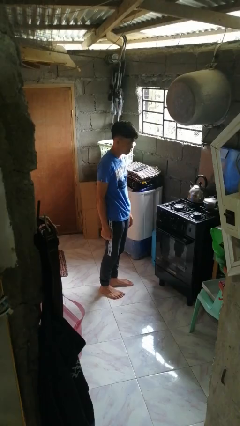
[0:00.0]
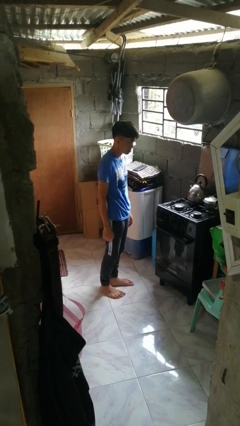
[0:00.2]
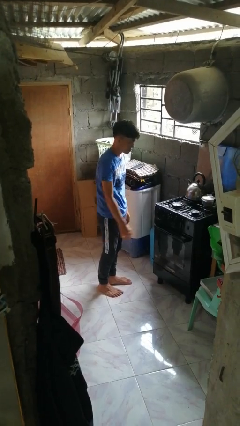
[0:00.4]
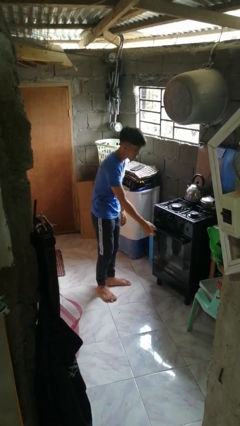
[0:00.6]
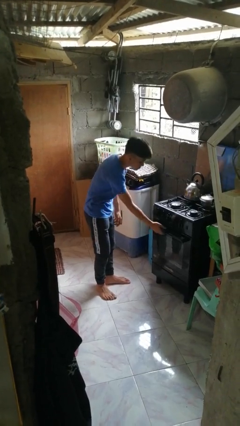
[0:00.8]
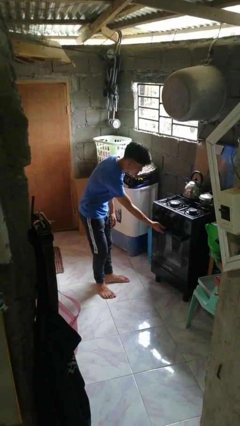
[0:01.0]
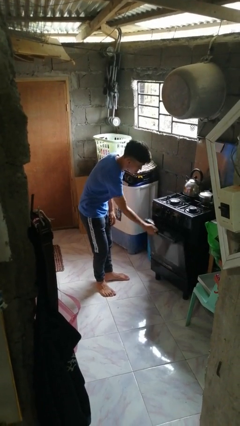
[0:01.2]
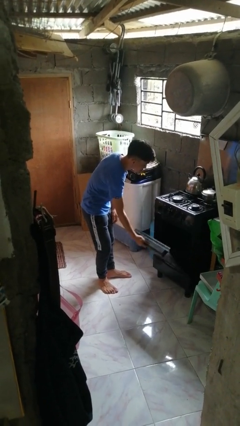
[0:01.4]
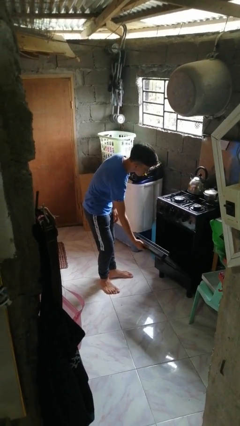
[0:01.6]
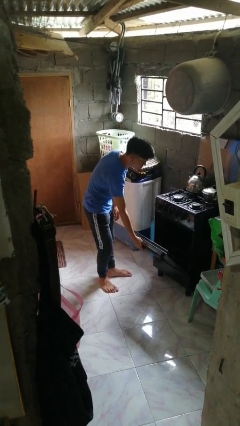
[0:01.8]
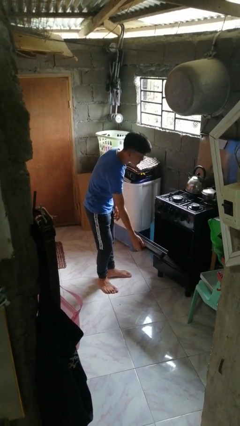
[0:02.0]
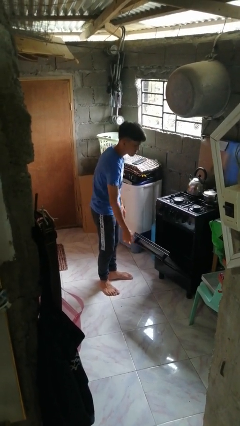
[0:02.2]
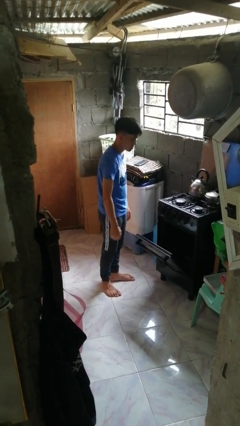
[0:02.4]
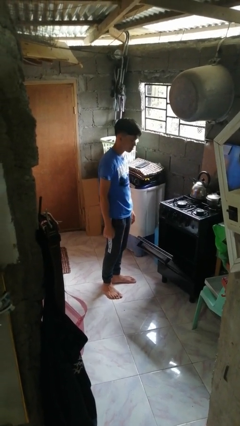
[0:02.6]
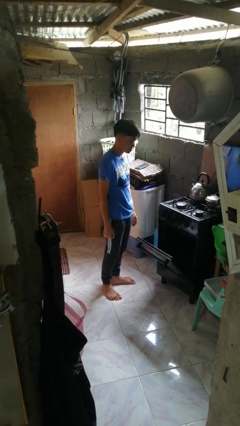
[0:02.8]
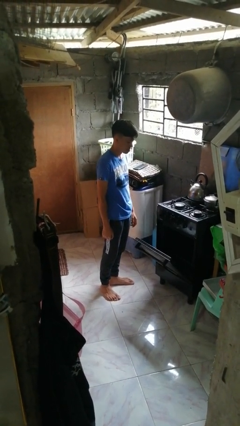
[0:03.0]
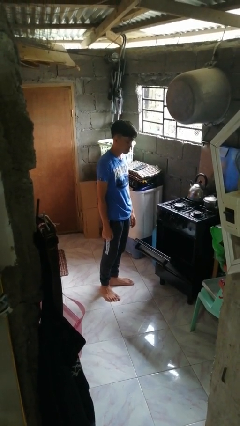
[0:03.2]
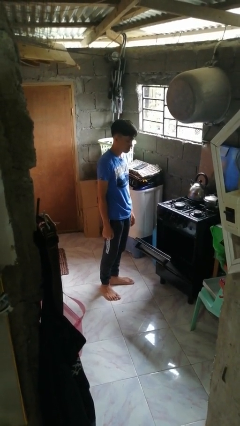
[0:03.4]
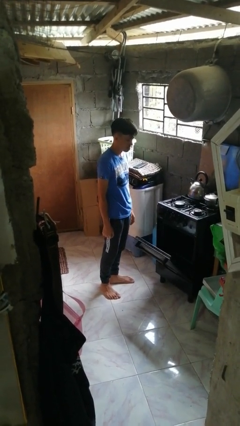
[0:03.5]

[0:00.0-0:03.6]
person opens oven door

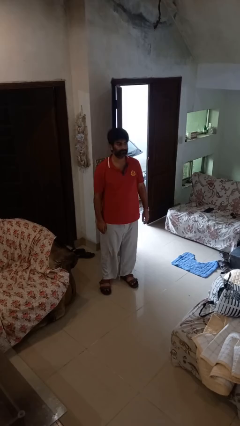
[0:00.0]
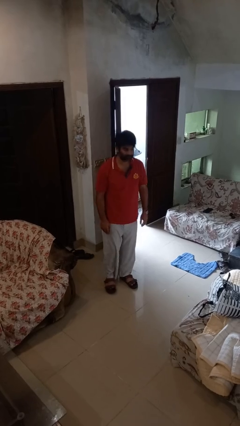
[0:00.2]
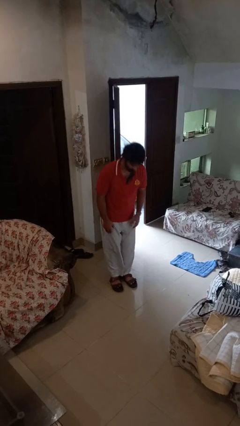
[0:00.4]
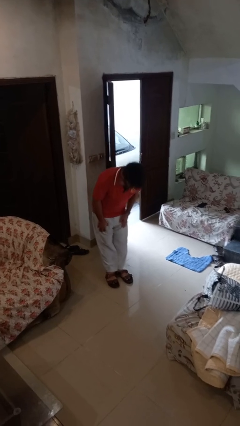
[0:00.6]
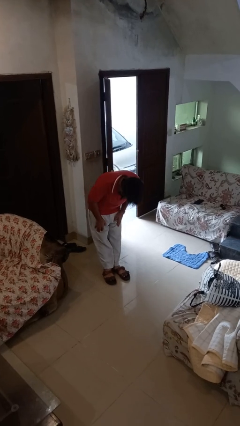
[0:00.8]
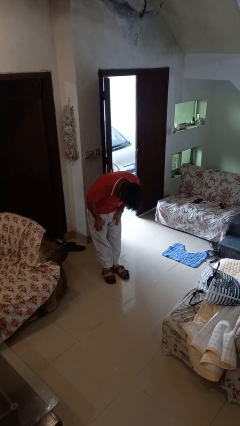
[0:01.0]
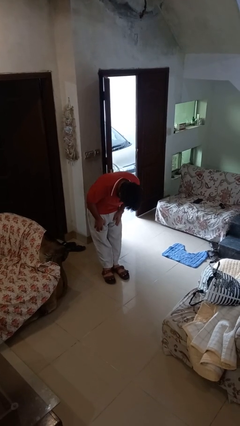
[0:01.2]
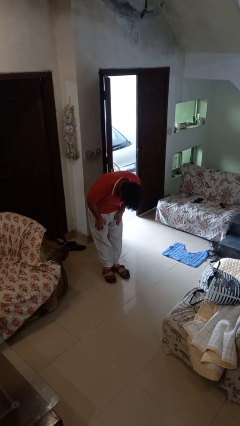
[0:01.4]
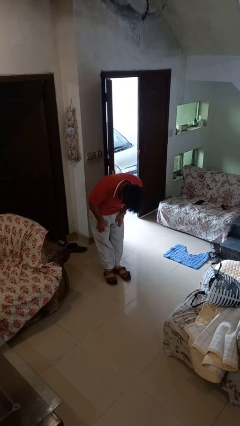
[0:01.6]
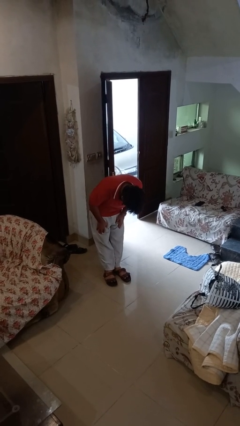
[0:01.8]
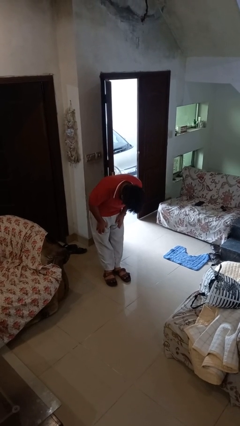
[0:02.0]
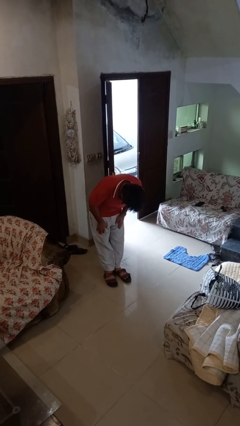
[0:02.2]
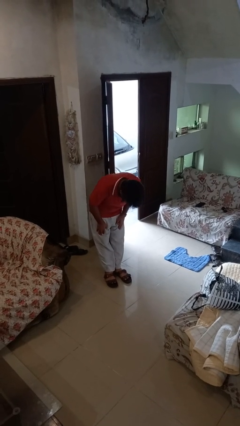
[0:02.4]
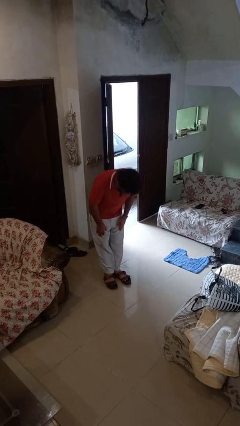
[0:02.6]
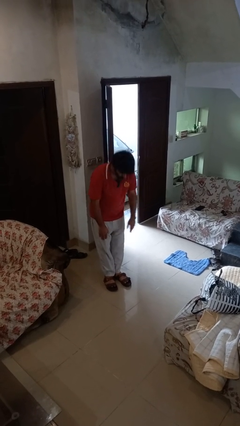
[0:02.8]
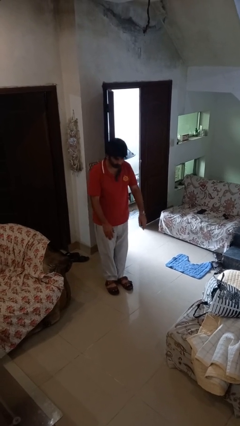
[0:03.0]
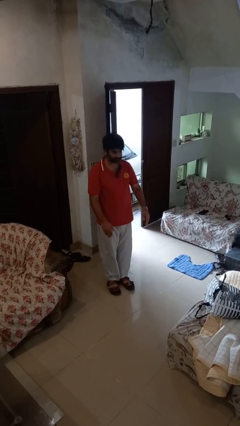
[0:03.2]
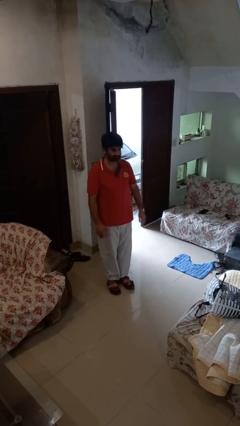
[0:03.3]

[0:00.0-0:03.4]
person bows

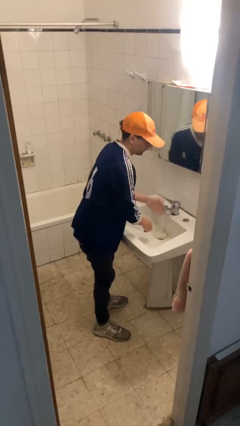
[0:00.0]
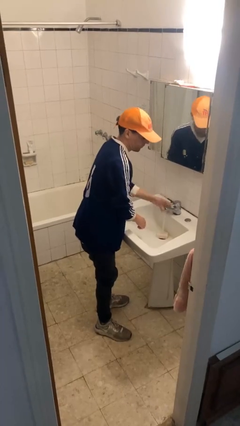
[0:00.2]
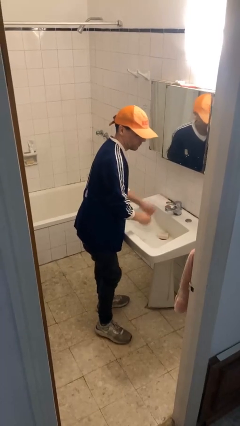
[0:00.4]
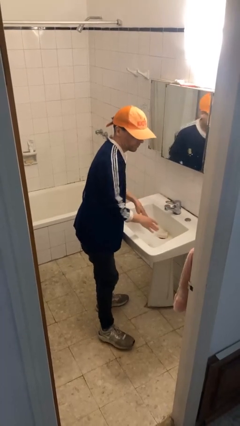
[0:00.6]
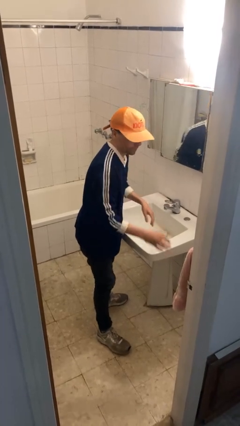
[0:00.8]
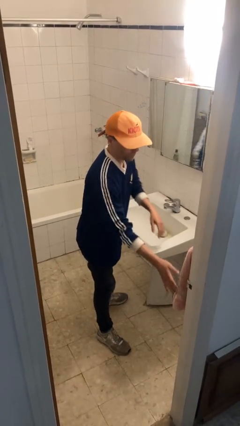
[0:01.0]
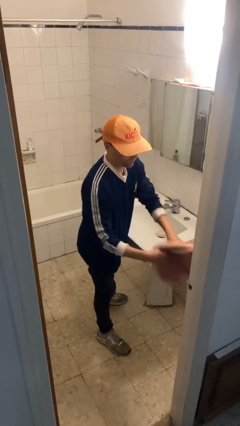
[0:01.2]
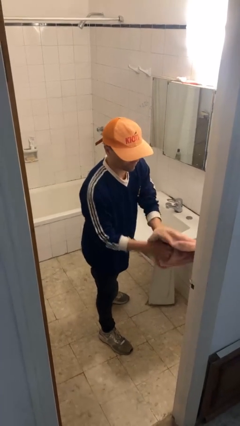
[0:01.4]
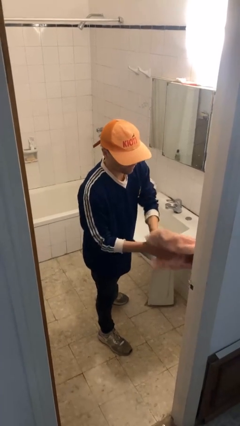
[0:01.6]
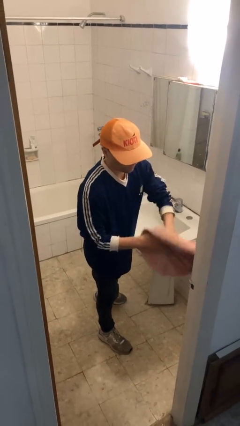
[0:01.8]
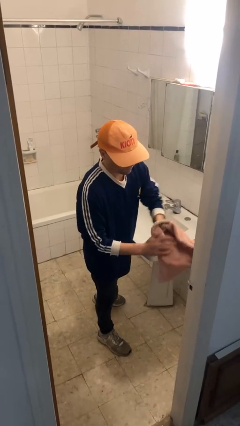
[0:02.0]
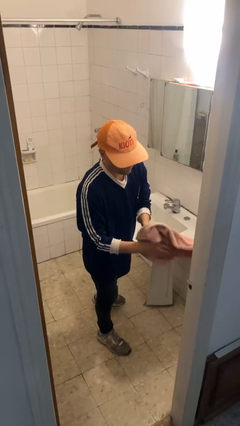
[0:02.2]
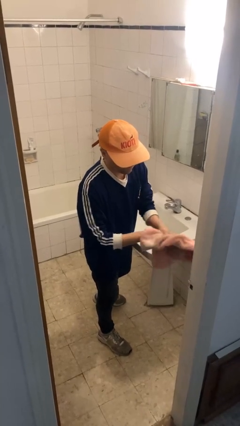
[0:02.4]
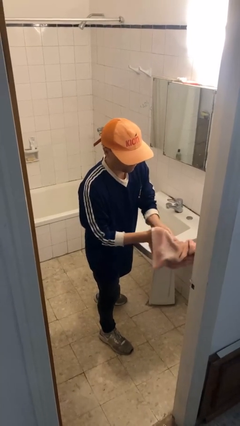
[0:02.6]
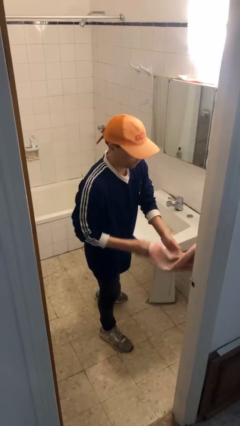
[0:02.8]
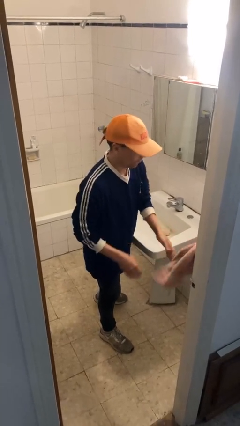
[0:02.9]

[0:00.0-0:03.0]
person dries hands with towel

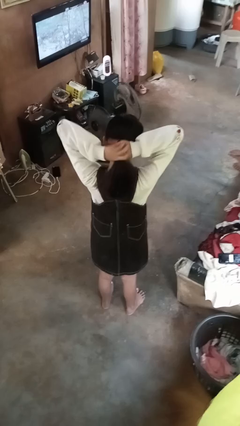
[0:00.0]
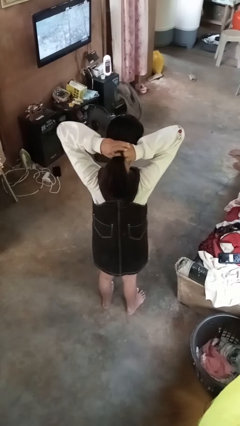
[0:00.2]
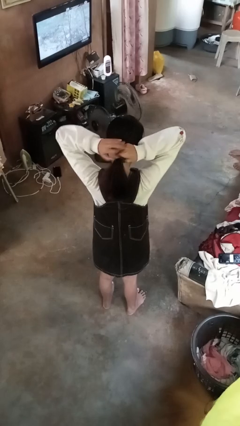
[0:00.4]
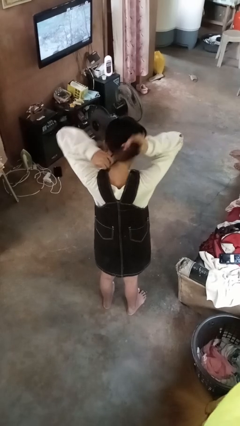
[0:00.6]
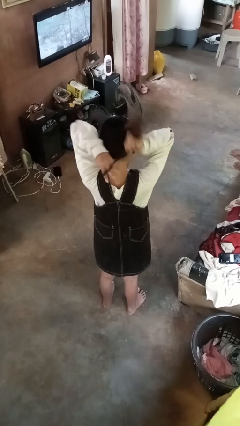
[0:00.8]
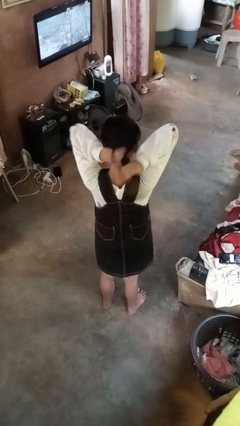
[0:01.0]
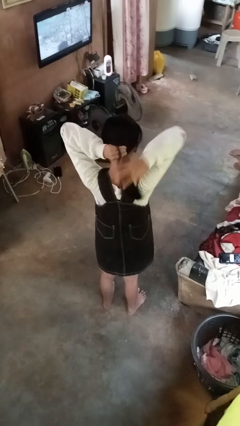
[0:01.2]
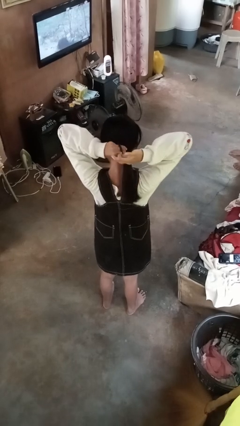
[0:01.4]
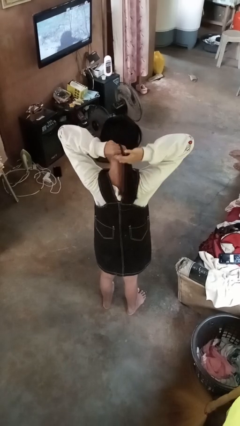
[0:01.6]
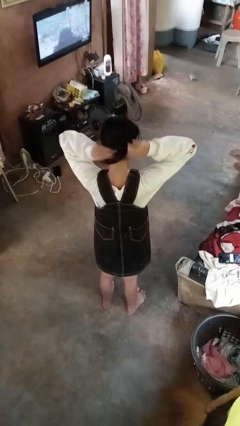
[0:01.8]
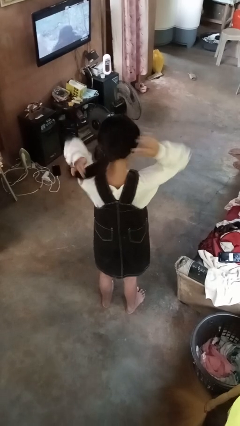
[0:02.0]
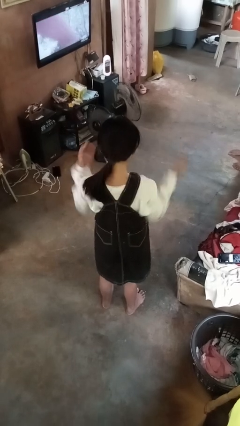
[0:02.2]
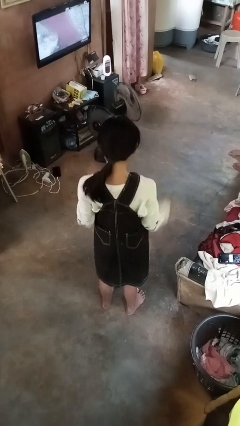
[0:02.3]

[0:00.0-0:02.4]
person puts hair in ponytail

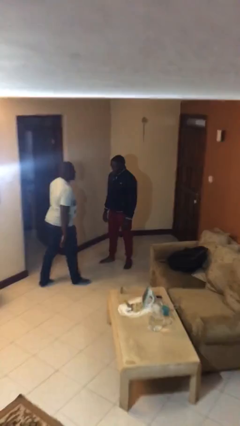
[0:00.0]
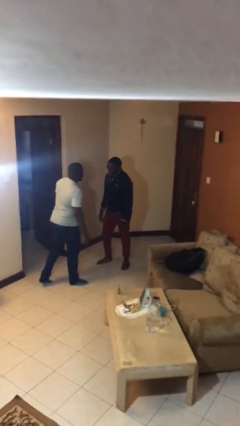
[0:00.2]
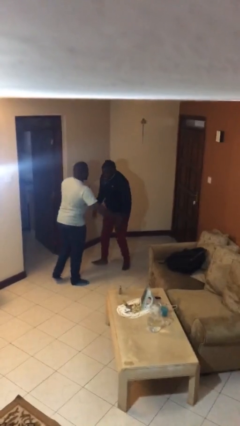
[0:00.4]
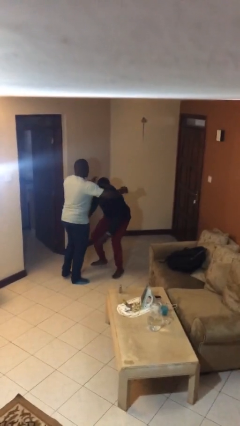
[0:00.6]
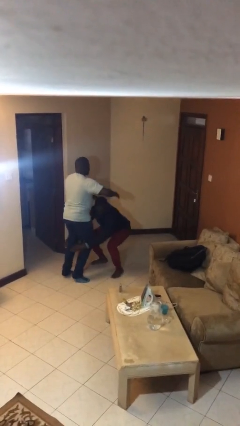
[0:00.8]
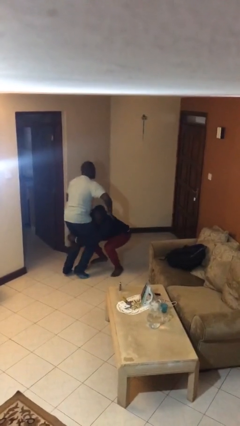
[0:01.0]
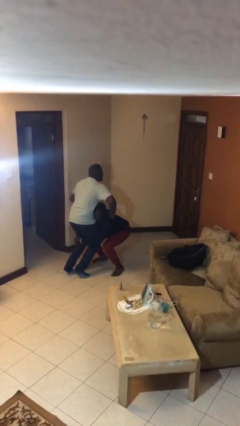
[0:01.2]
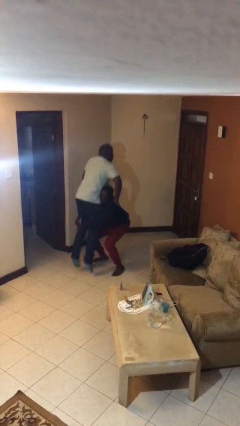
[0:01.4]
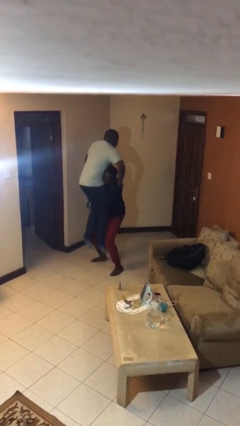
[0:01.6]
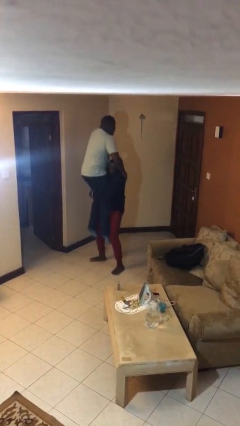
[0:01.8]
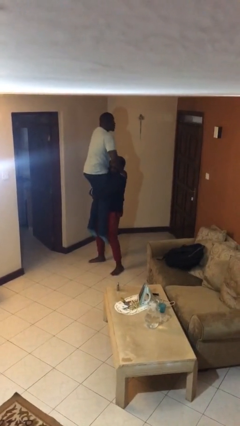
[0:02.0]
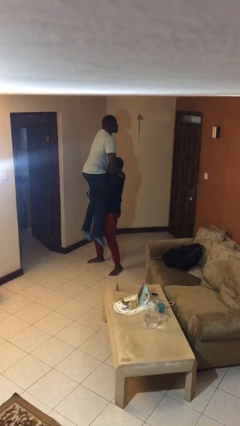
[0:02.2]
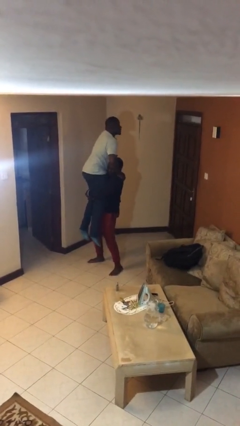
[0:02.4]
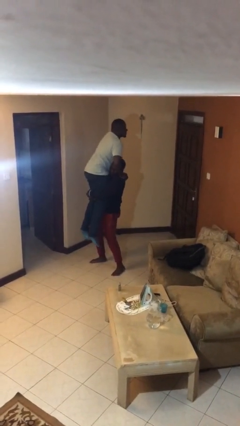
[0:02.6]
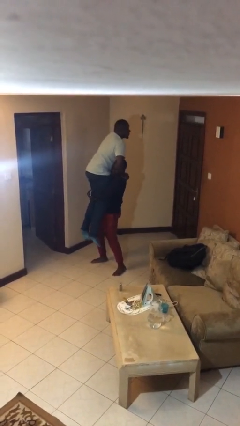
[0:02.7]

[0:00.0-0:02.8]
person picks up person

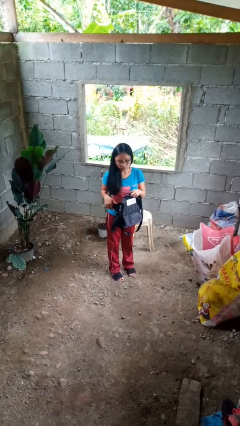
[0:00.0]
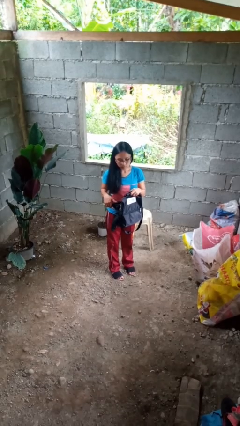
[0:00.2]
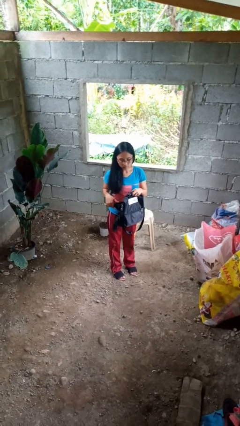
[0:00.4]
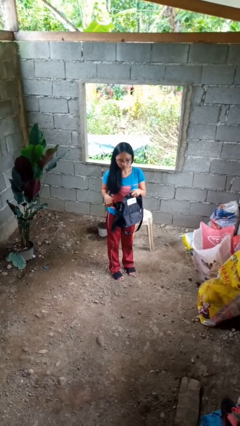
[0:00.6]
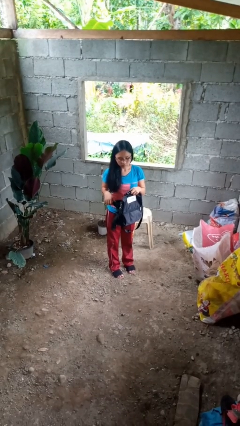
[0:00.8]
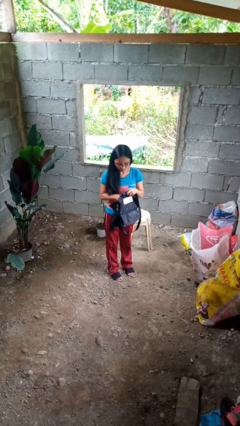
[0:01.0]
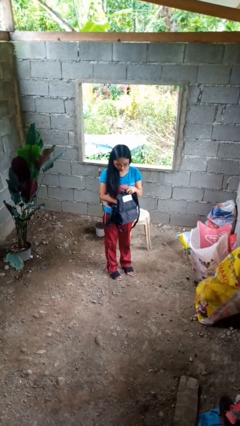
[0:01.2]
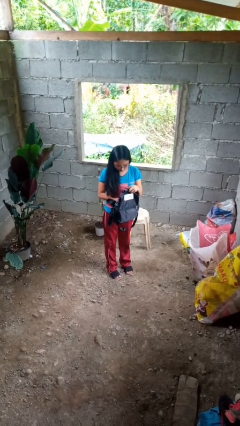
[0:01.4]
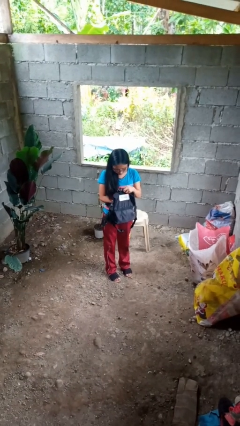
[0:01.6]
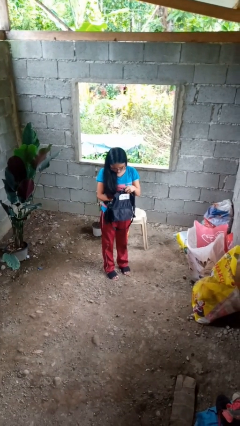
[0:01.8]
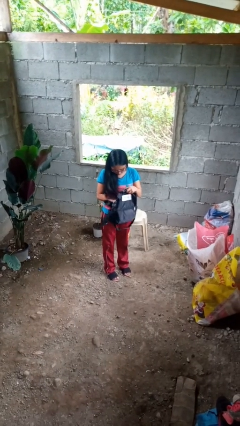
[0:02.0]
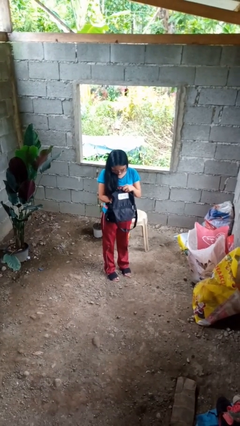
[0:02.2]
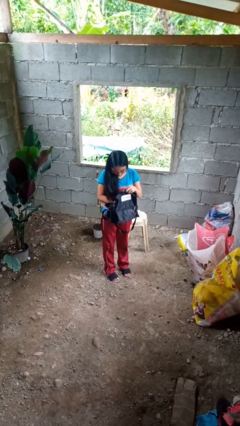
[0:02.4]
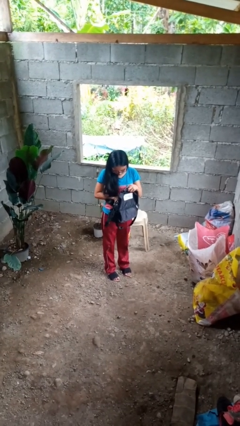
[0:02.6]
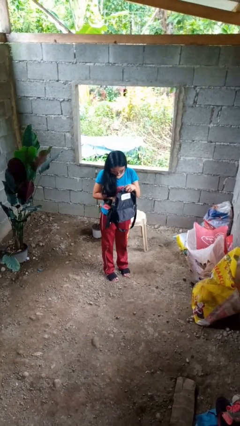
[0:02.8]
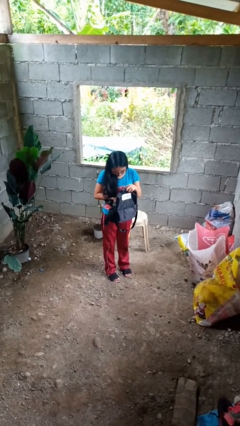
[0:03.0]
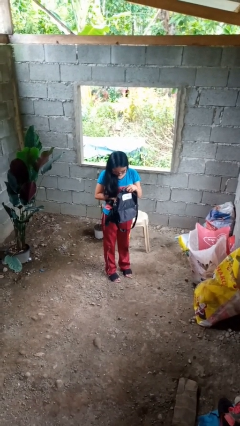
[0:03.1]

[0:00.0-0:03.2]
person searches in backpack
